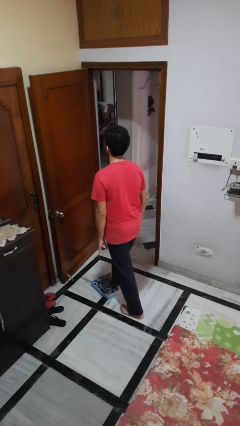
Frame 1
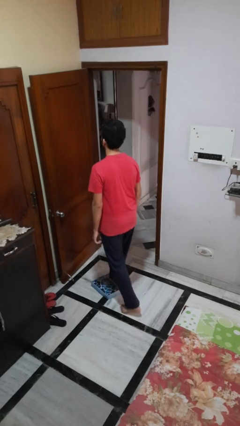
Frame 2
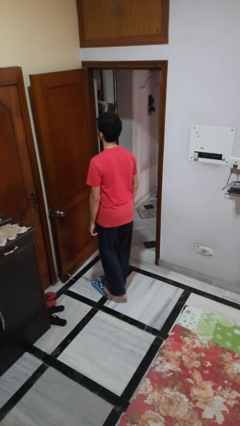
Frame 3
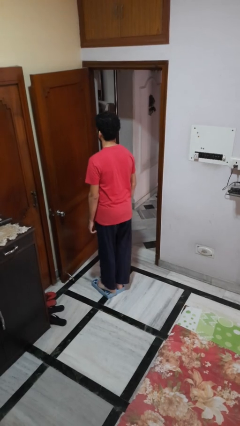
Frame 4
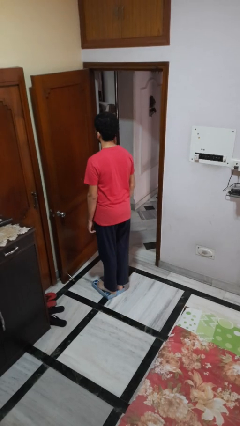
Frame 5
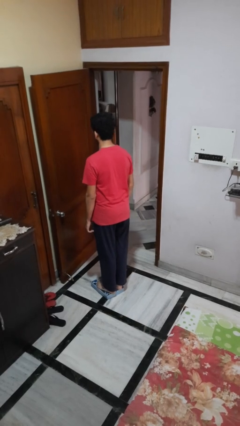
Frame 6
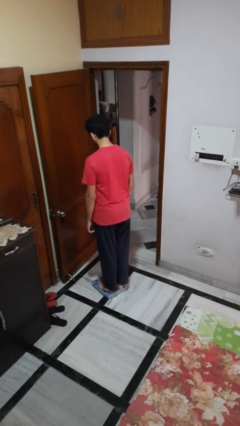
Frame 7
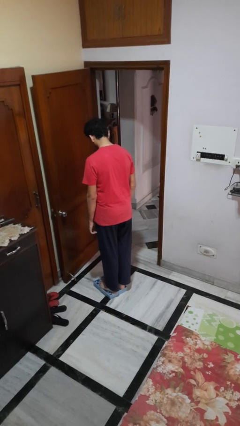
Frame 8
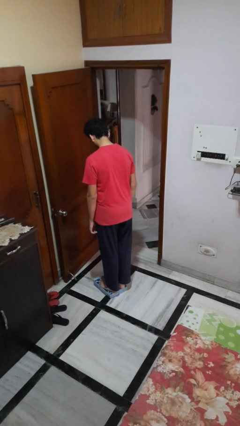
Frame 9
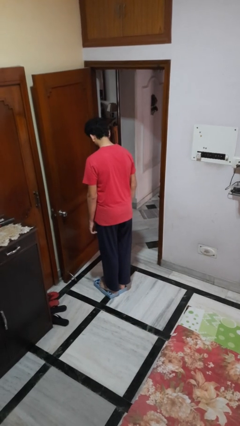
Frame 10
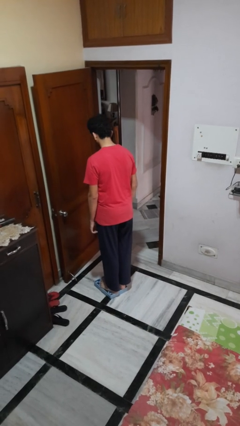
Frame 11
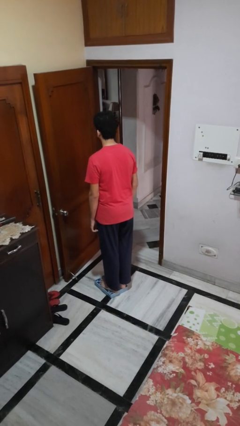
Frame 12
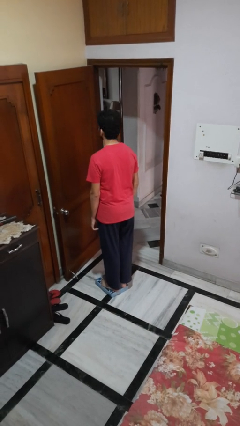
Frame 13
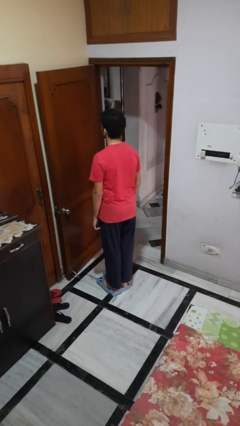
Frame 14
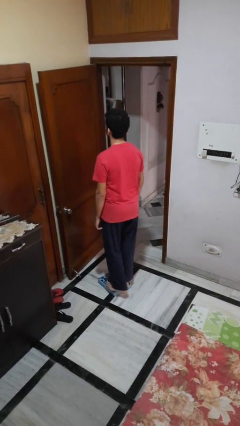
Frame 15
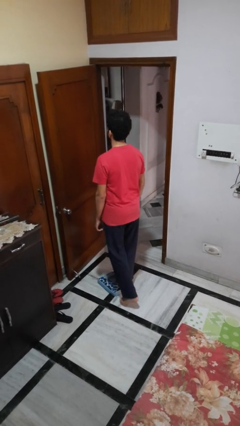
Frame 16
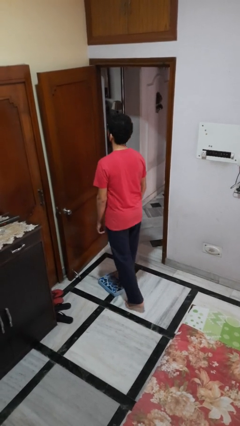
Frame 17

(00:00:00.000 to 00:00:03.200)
person uses bodyweight scale

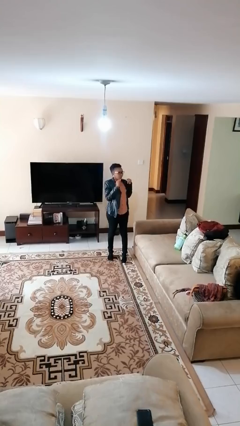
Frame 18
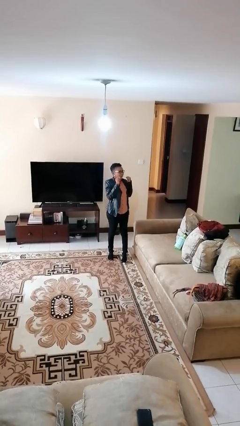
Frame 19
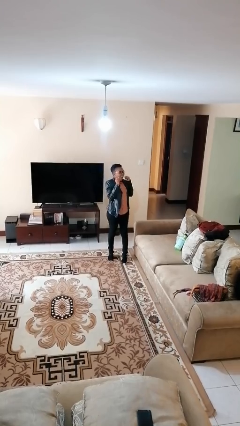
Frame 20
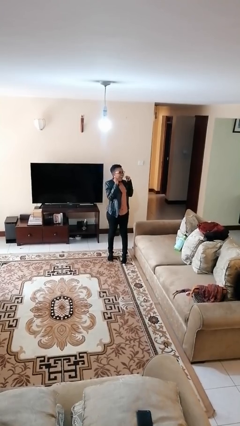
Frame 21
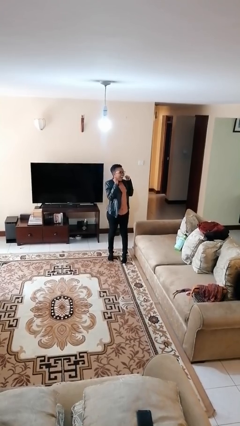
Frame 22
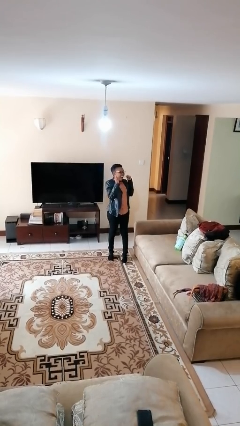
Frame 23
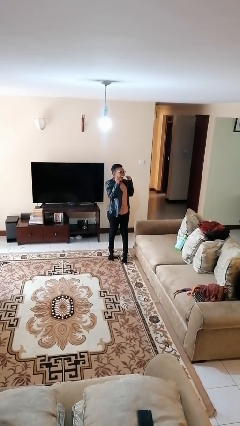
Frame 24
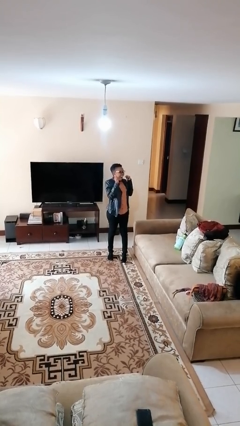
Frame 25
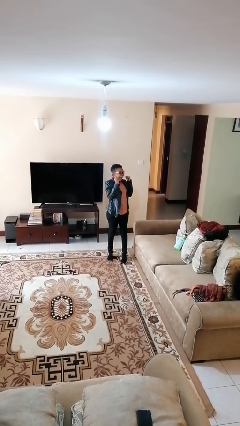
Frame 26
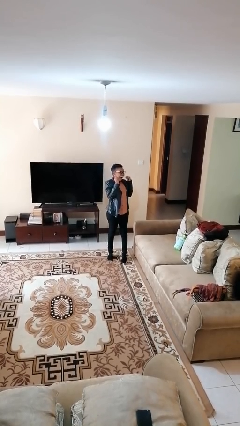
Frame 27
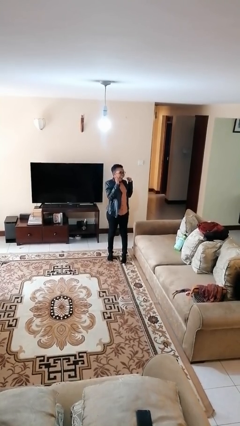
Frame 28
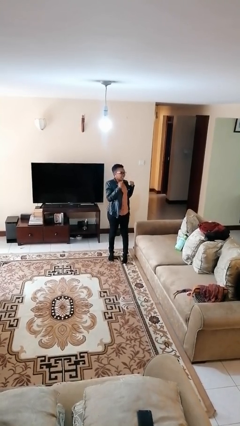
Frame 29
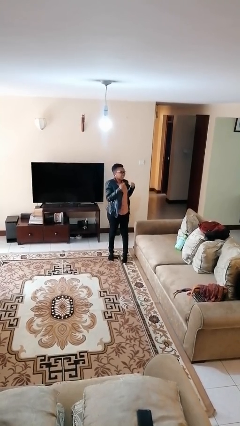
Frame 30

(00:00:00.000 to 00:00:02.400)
person flosses

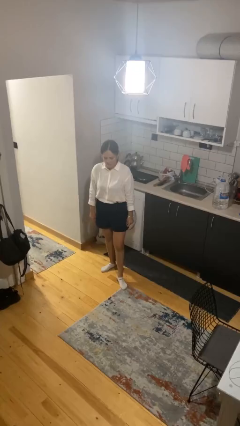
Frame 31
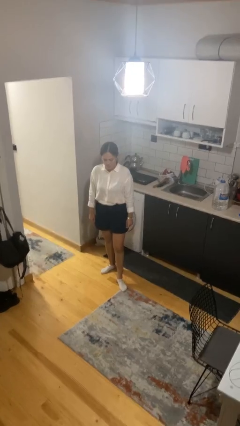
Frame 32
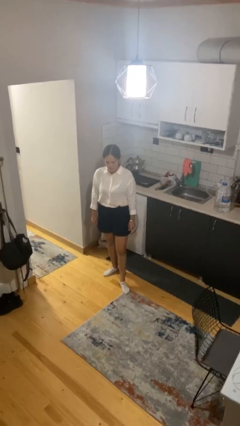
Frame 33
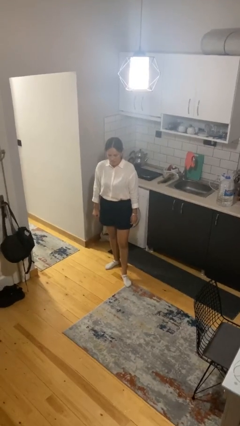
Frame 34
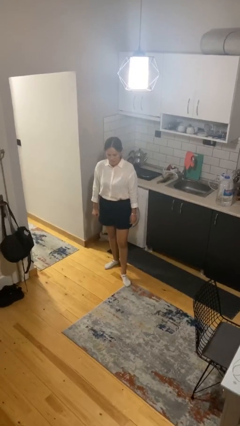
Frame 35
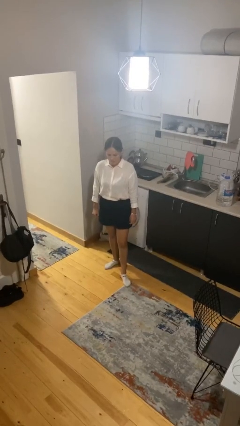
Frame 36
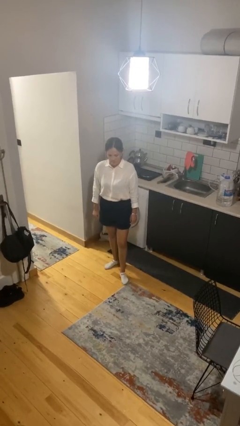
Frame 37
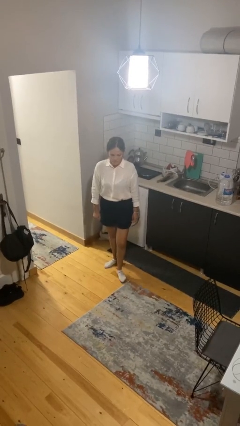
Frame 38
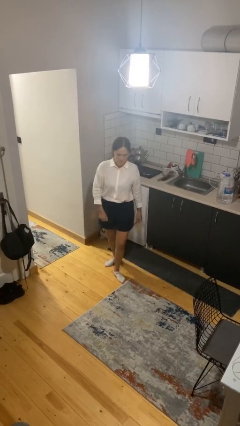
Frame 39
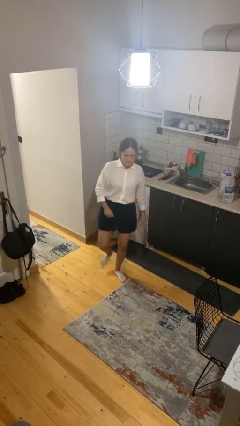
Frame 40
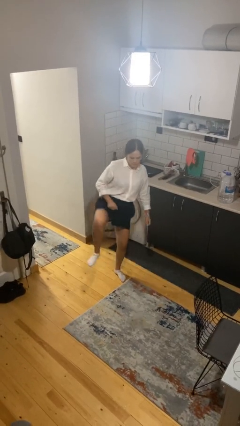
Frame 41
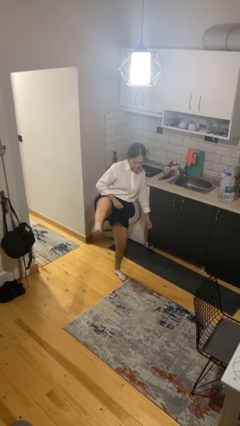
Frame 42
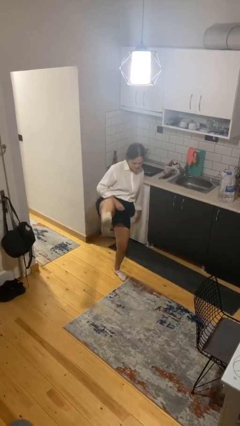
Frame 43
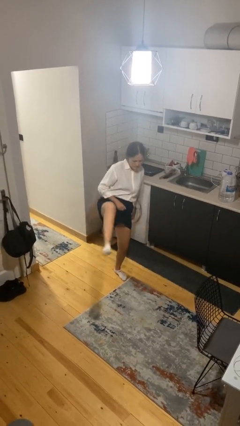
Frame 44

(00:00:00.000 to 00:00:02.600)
person karate kicks

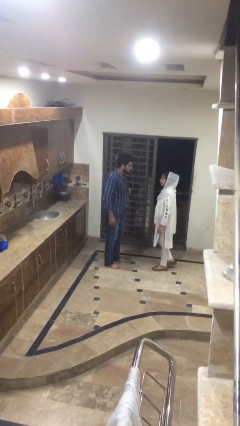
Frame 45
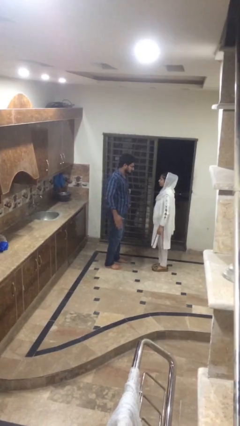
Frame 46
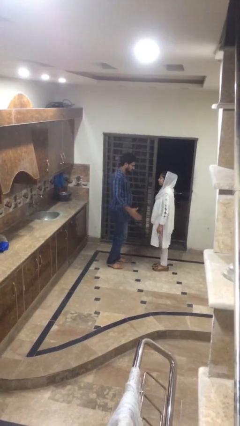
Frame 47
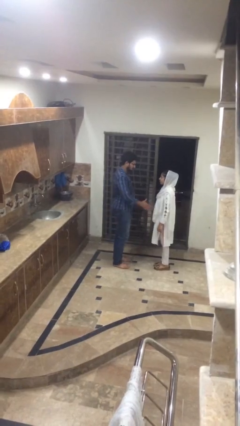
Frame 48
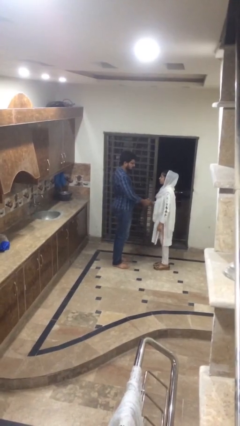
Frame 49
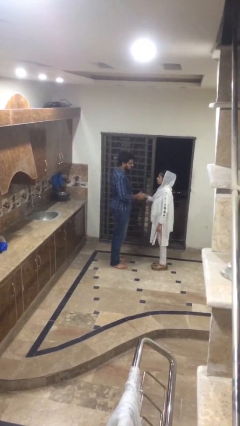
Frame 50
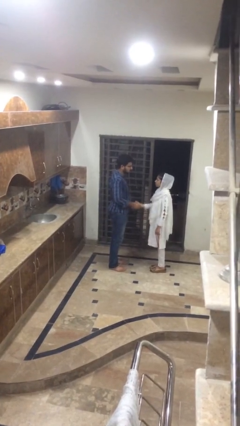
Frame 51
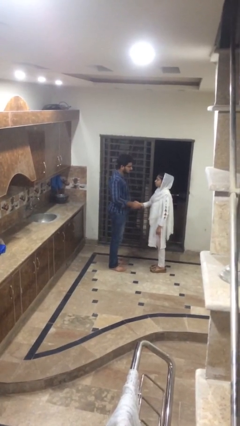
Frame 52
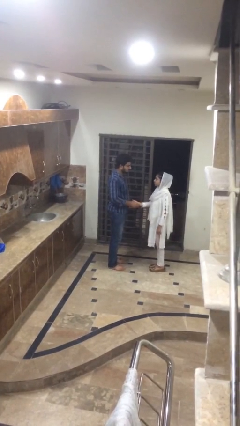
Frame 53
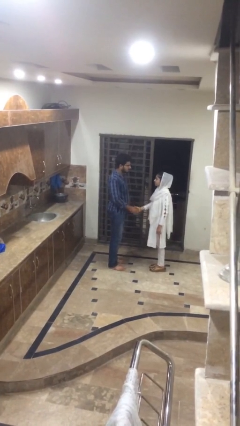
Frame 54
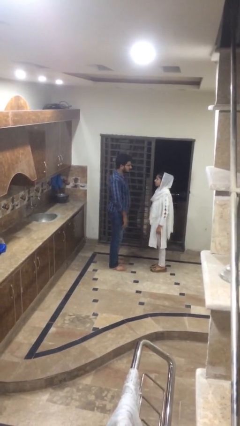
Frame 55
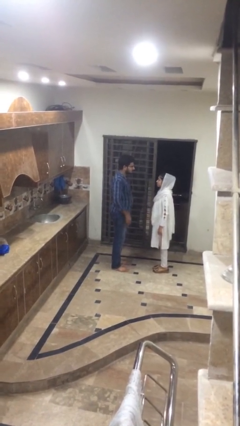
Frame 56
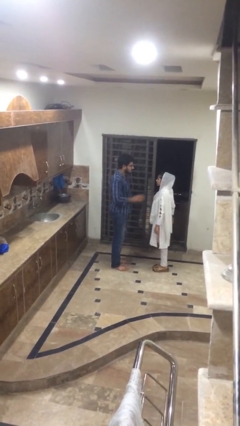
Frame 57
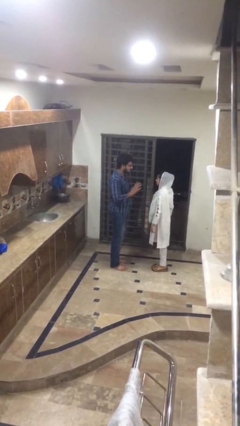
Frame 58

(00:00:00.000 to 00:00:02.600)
person shakes hand

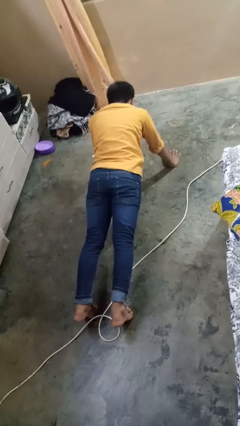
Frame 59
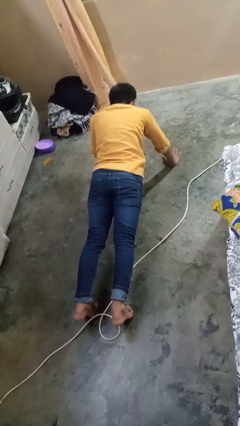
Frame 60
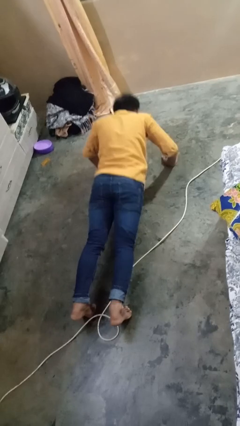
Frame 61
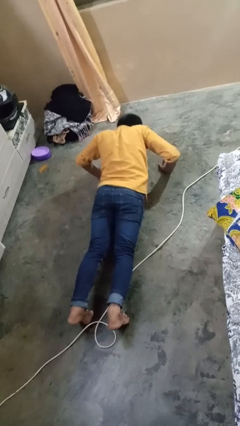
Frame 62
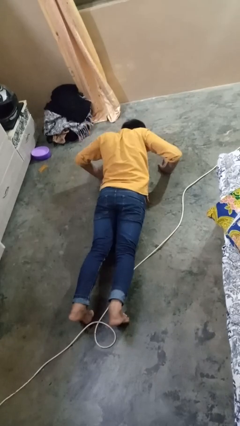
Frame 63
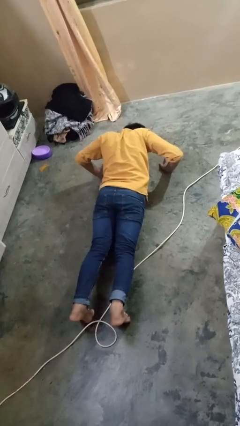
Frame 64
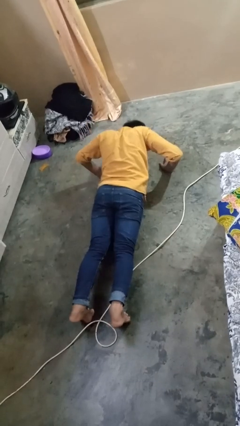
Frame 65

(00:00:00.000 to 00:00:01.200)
person exercises with pushup

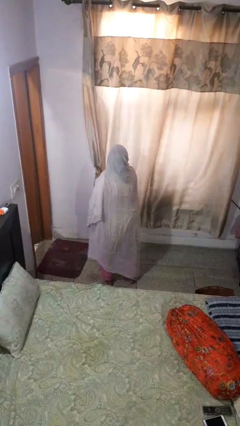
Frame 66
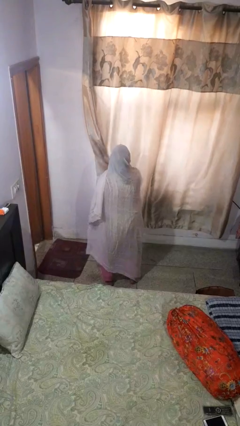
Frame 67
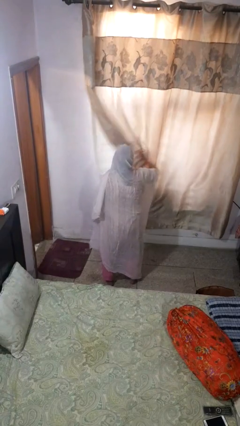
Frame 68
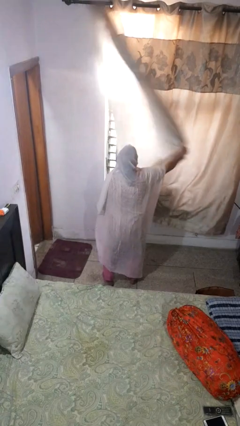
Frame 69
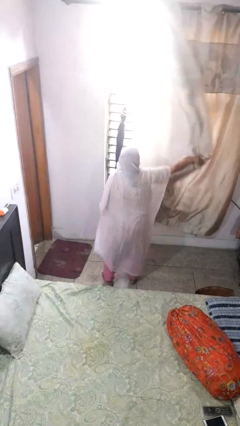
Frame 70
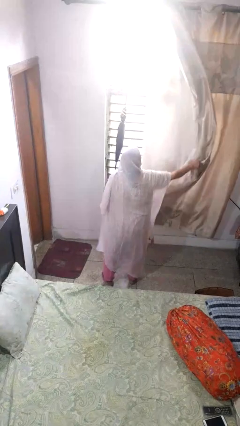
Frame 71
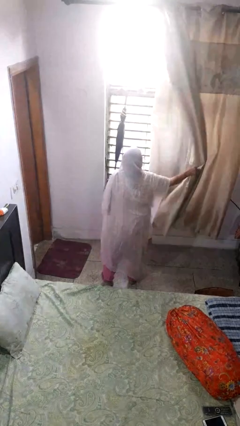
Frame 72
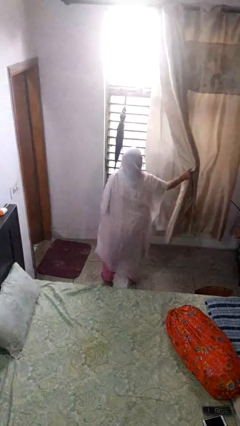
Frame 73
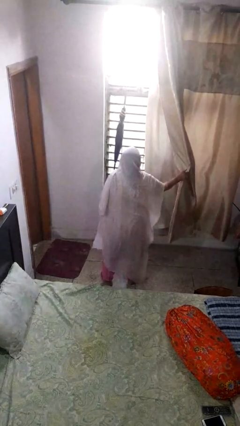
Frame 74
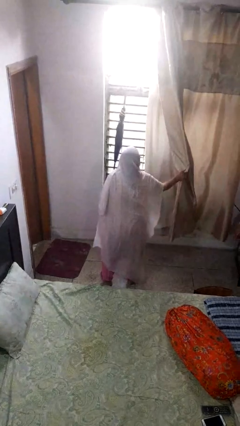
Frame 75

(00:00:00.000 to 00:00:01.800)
person opens curtains

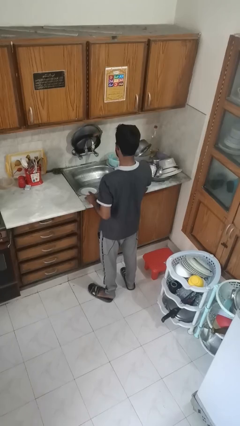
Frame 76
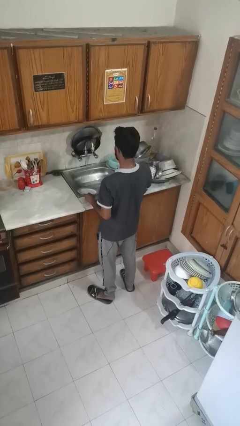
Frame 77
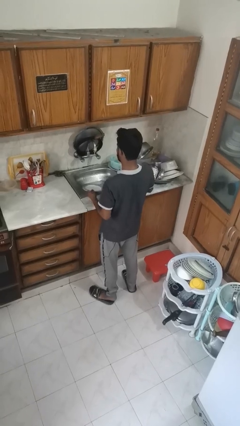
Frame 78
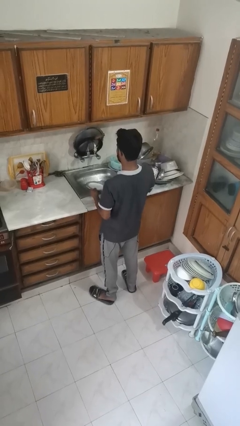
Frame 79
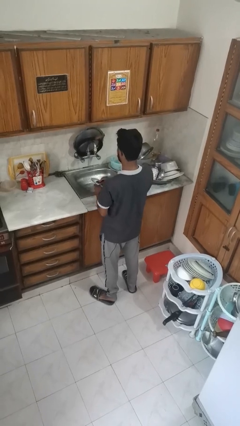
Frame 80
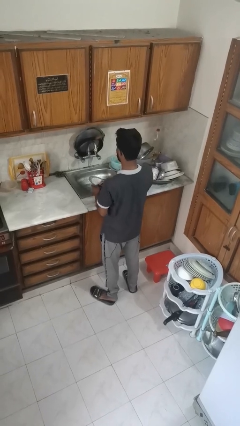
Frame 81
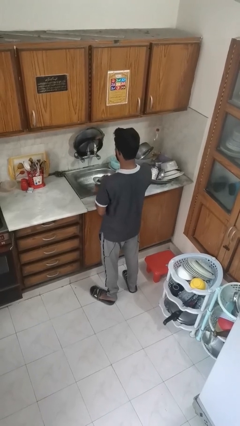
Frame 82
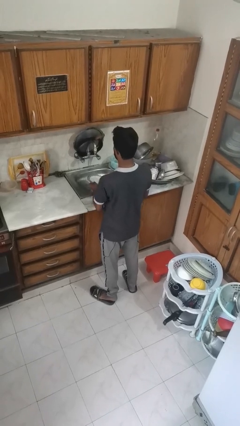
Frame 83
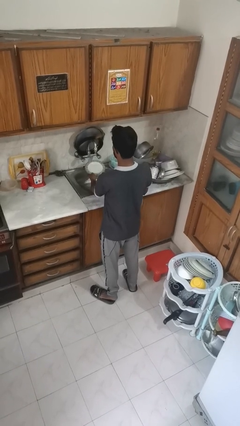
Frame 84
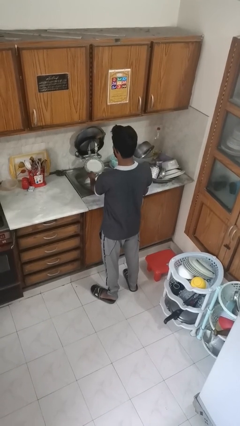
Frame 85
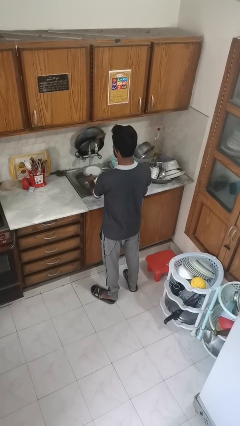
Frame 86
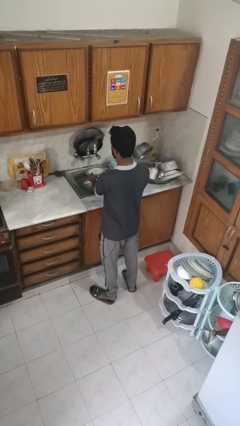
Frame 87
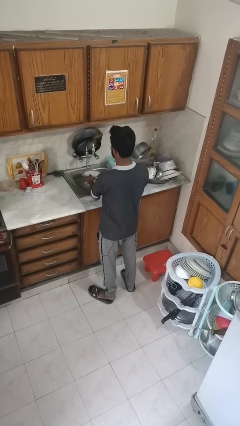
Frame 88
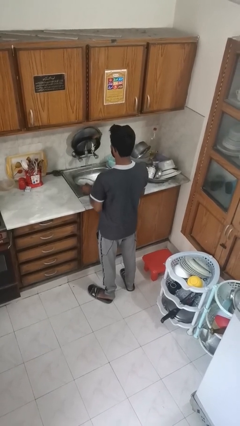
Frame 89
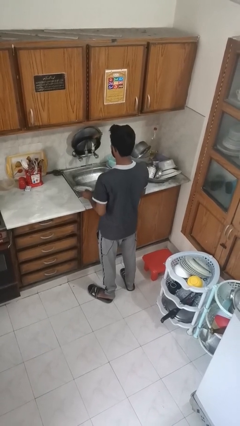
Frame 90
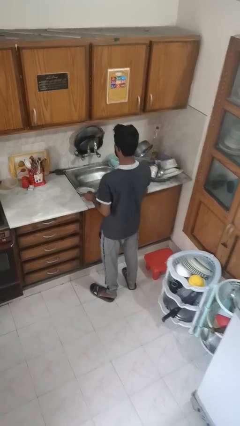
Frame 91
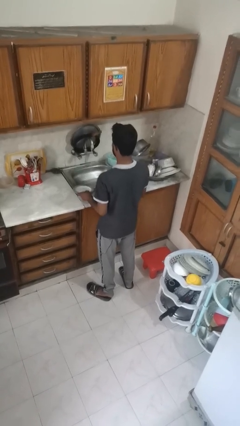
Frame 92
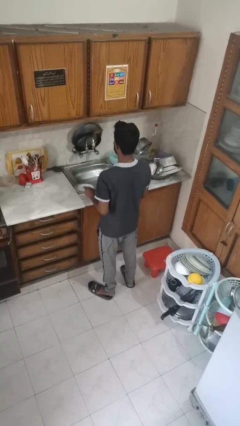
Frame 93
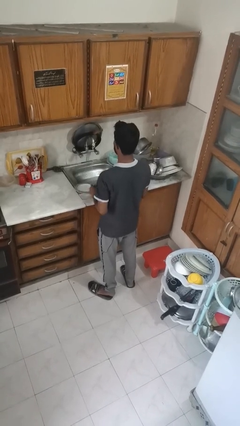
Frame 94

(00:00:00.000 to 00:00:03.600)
person washes dish
